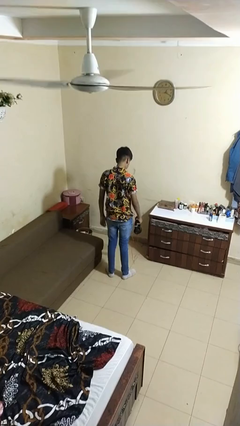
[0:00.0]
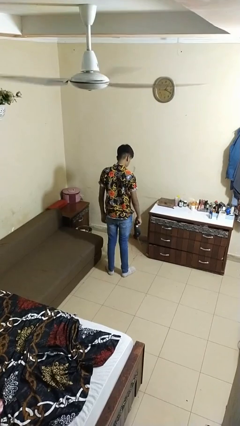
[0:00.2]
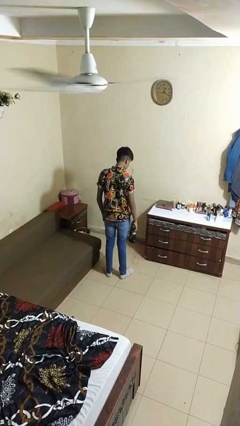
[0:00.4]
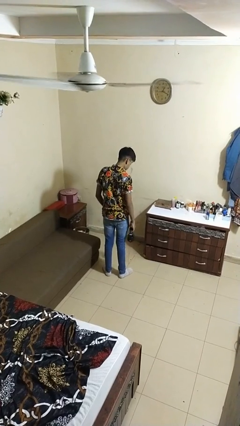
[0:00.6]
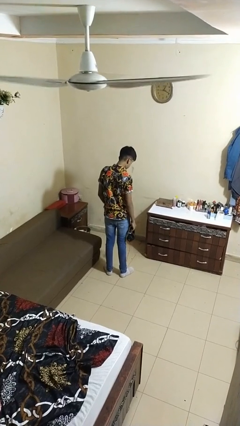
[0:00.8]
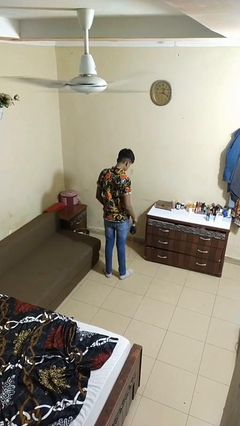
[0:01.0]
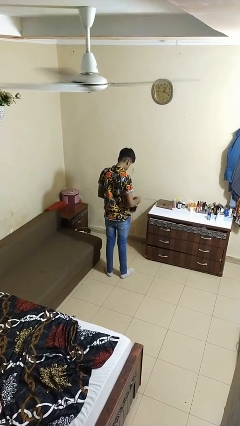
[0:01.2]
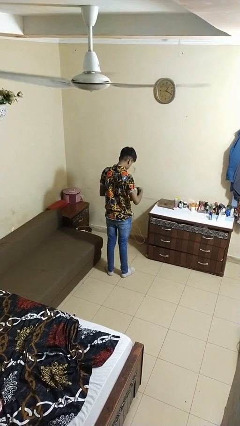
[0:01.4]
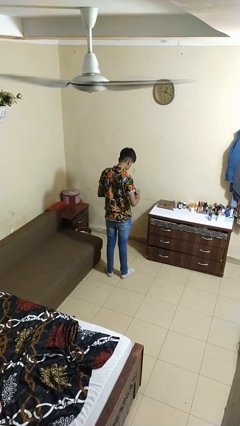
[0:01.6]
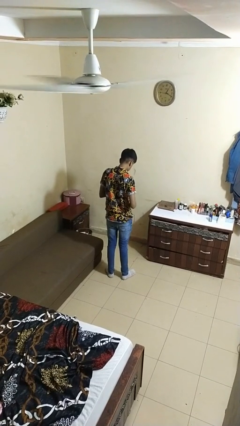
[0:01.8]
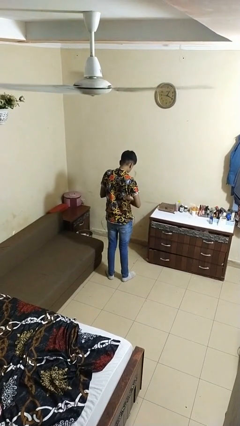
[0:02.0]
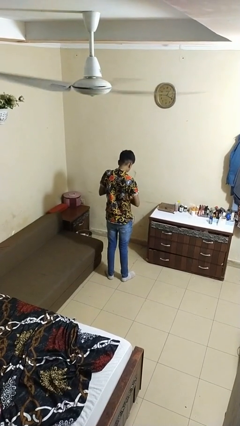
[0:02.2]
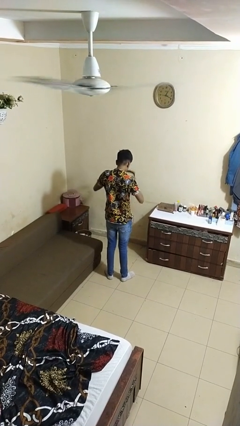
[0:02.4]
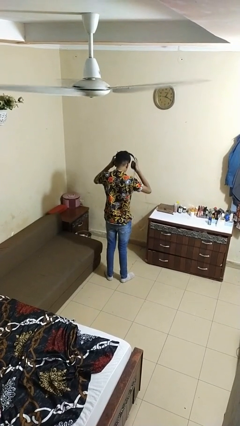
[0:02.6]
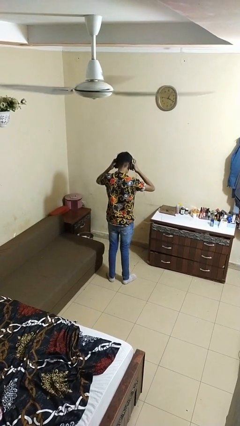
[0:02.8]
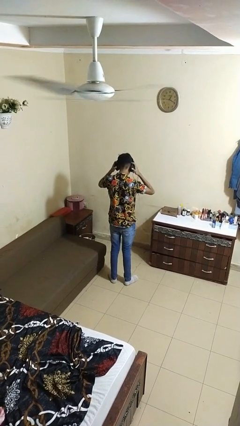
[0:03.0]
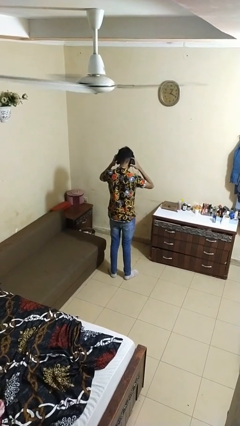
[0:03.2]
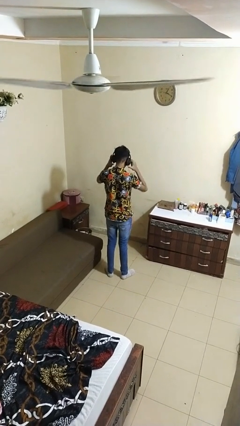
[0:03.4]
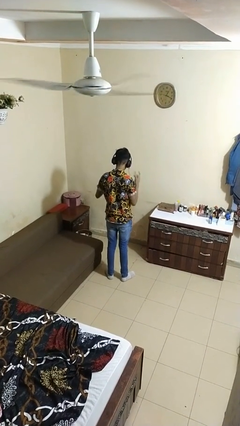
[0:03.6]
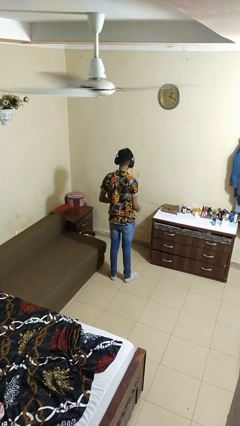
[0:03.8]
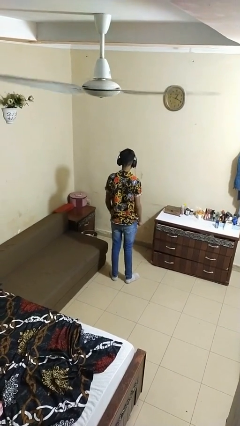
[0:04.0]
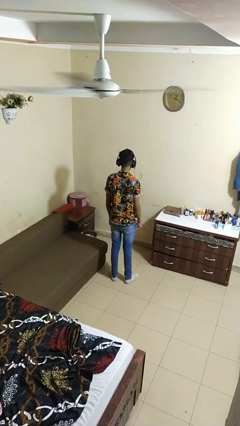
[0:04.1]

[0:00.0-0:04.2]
person puts on headphones

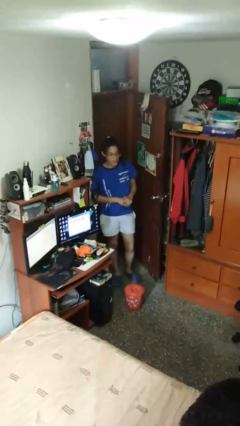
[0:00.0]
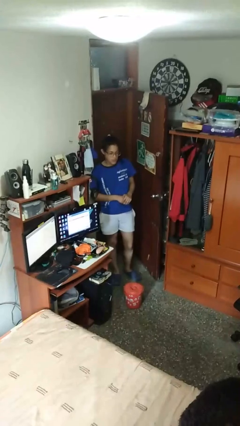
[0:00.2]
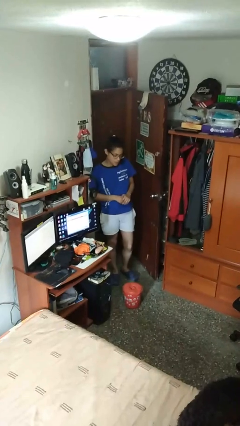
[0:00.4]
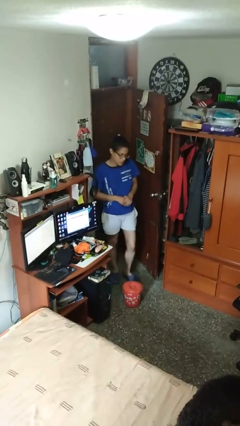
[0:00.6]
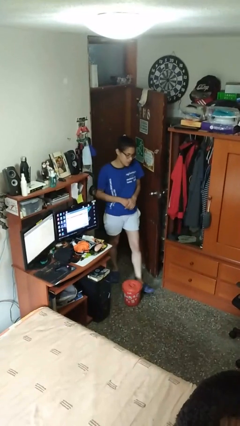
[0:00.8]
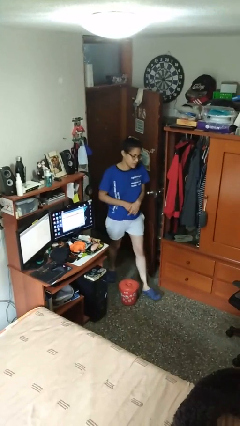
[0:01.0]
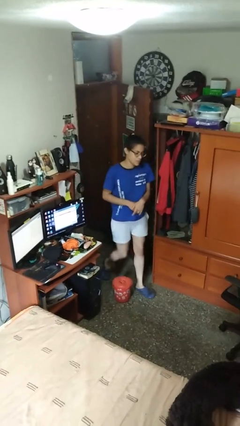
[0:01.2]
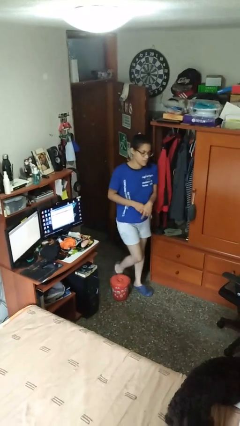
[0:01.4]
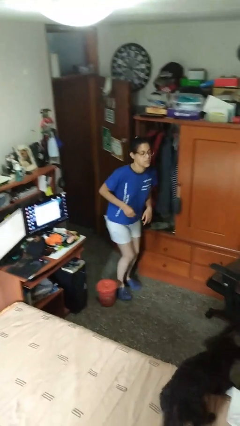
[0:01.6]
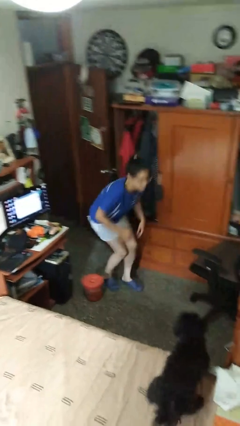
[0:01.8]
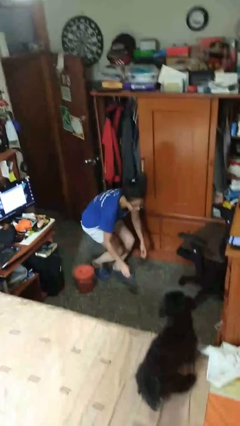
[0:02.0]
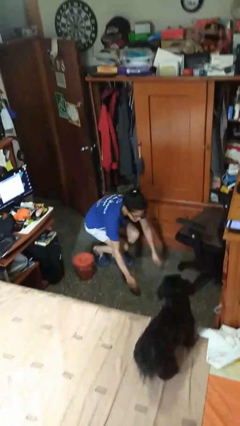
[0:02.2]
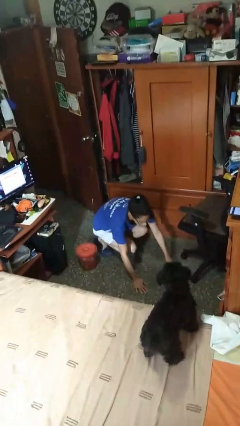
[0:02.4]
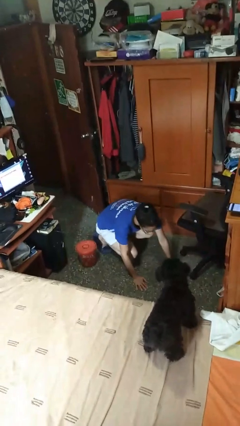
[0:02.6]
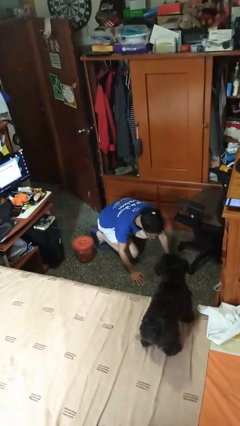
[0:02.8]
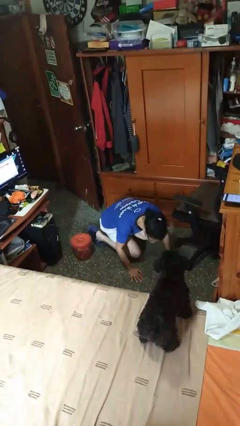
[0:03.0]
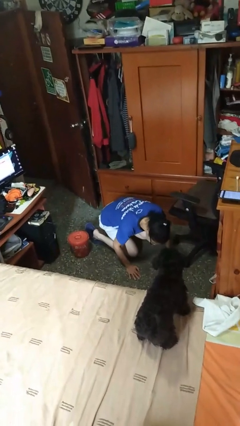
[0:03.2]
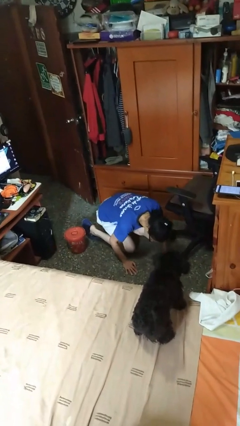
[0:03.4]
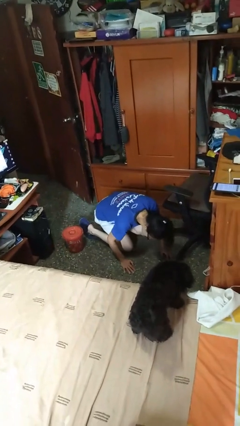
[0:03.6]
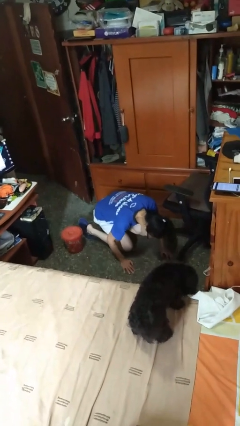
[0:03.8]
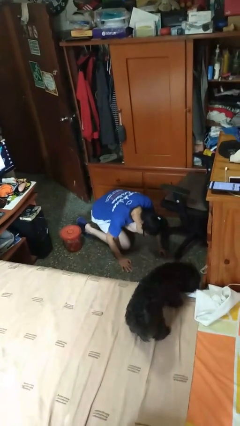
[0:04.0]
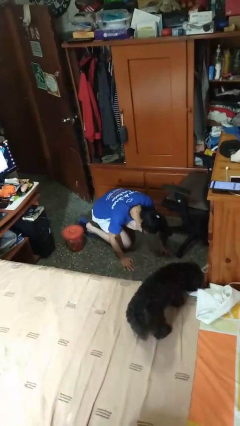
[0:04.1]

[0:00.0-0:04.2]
person trips on object on floor

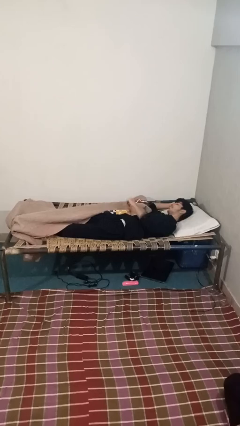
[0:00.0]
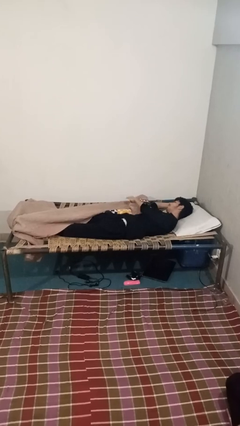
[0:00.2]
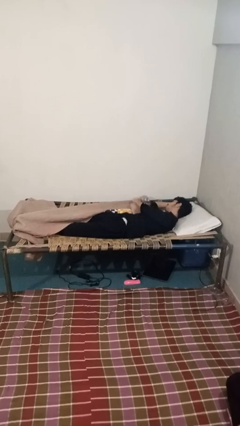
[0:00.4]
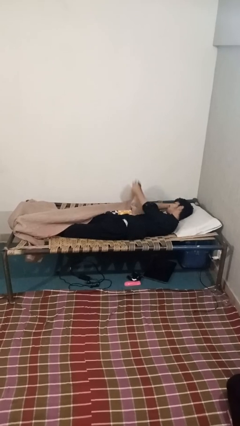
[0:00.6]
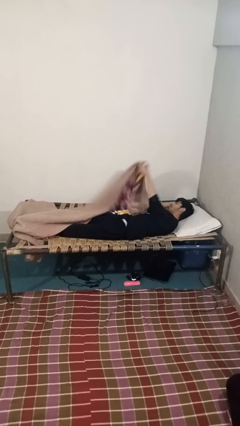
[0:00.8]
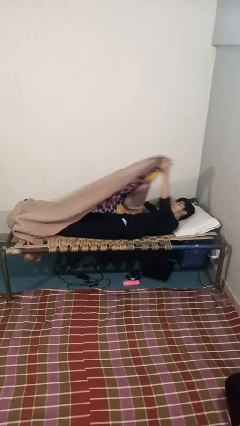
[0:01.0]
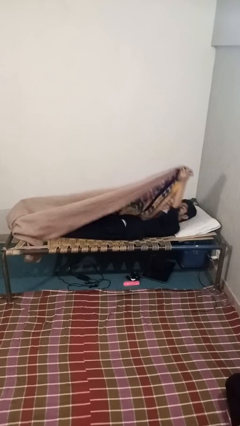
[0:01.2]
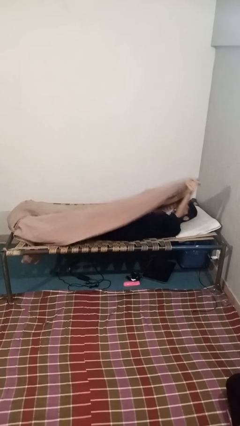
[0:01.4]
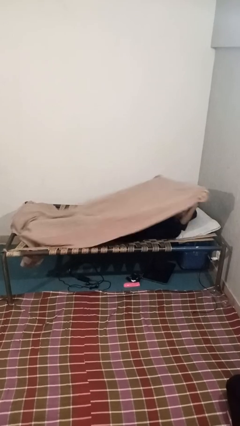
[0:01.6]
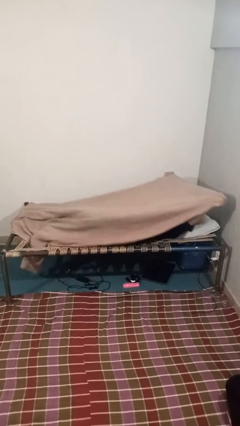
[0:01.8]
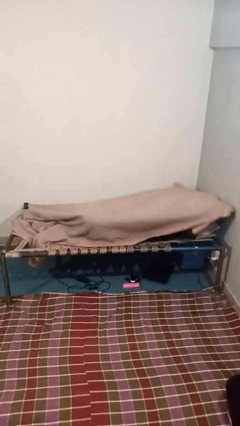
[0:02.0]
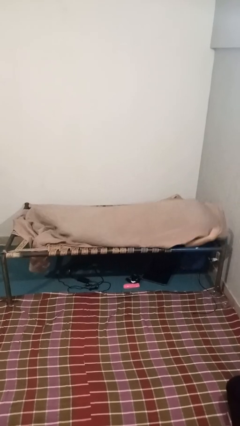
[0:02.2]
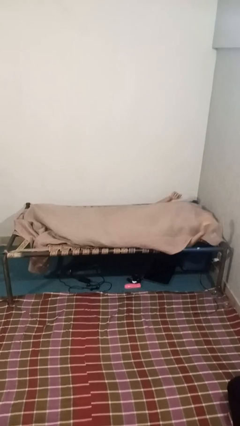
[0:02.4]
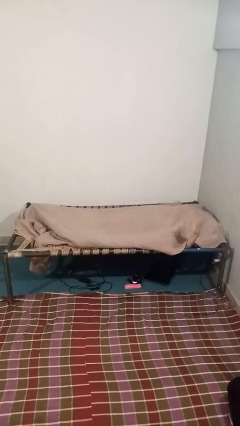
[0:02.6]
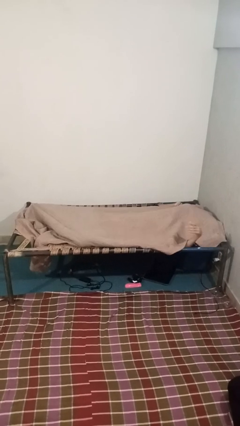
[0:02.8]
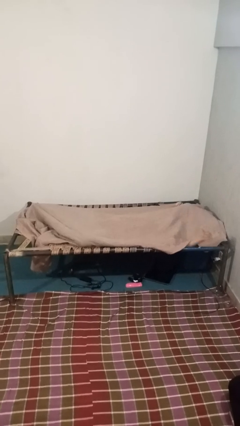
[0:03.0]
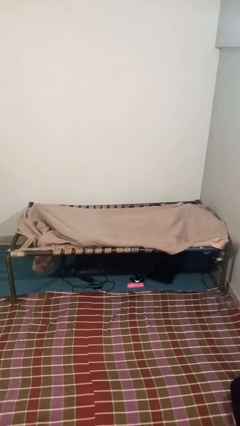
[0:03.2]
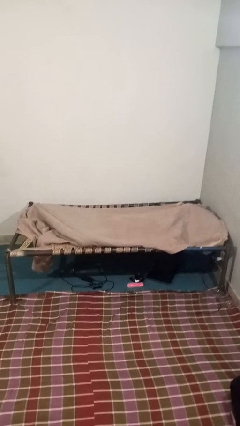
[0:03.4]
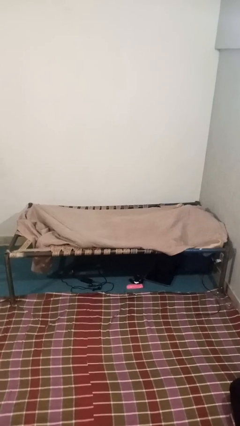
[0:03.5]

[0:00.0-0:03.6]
person covers with blanket

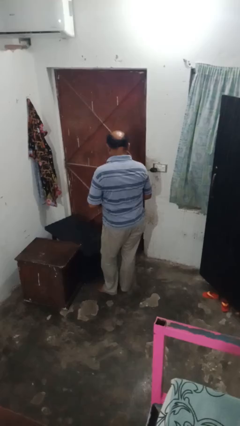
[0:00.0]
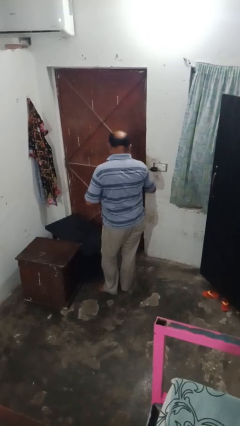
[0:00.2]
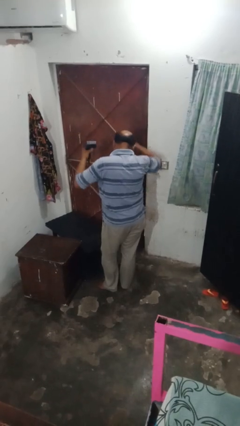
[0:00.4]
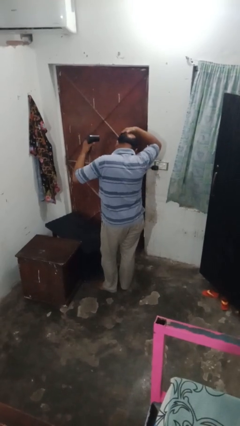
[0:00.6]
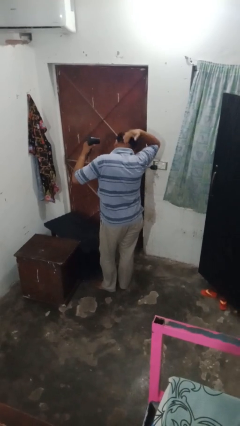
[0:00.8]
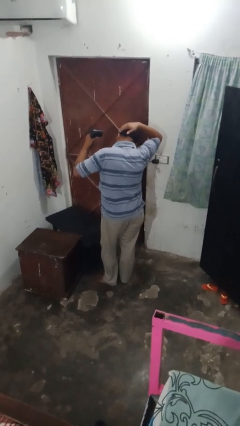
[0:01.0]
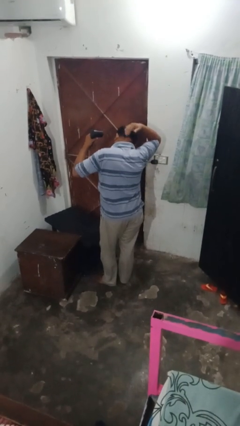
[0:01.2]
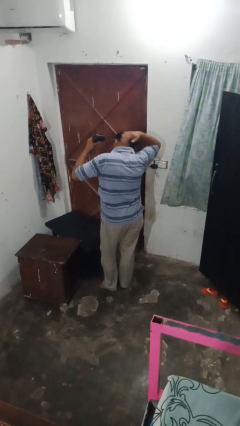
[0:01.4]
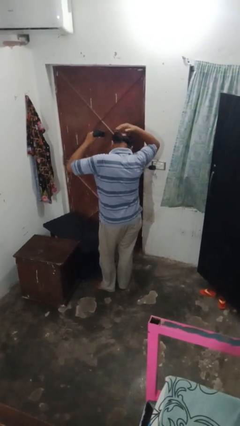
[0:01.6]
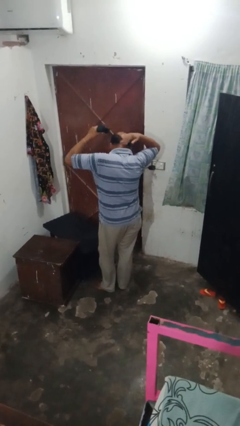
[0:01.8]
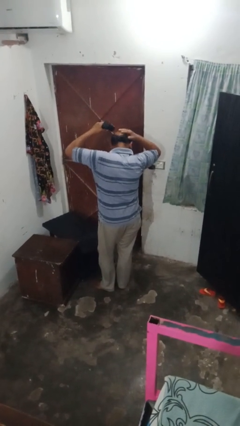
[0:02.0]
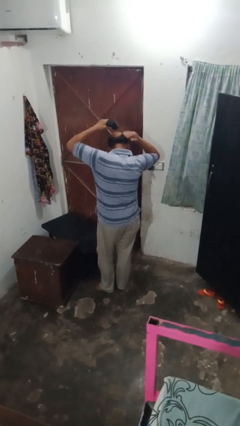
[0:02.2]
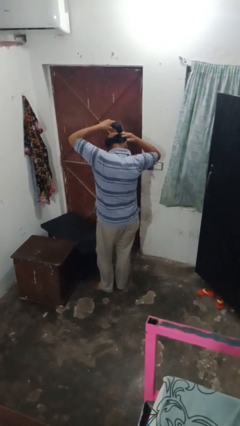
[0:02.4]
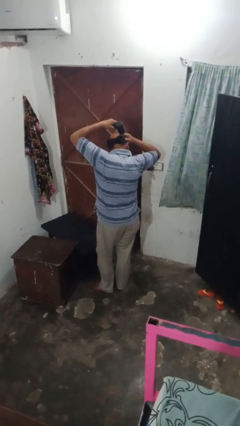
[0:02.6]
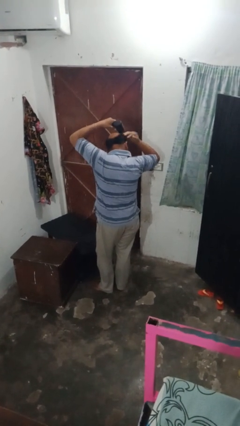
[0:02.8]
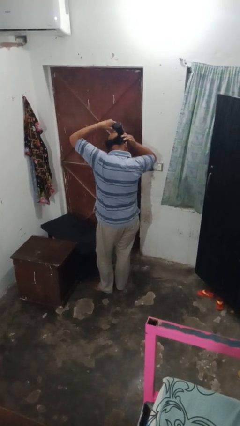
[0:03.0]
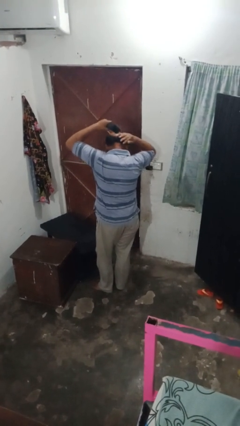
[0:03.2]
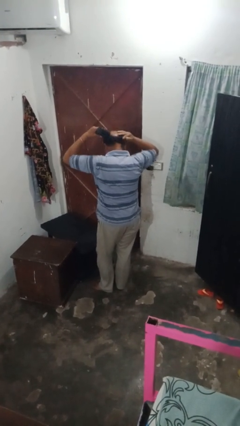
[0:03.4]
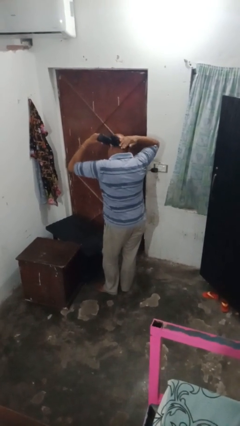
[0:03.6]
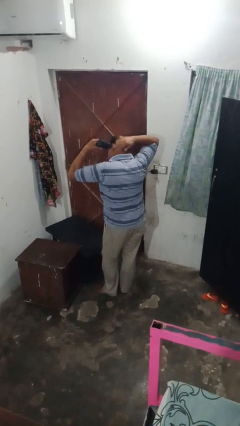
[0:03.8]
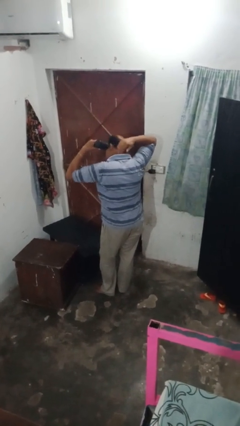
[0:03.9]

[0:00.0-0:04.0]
person dries hair with towel

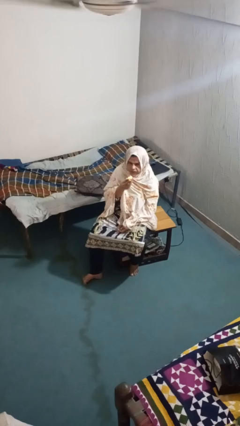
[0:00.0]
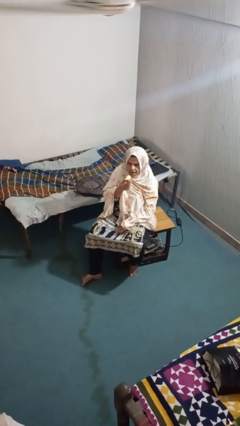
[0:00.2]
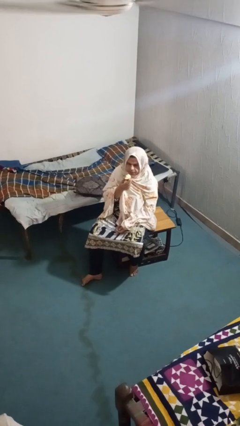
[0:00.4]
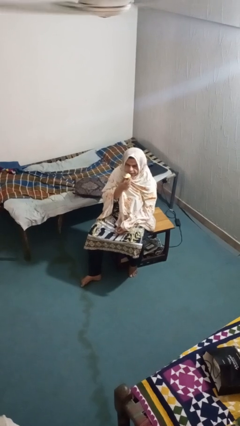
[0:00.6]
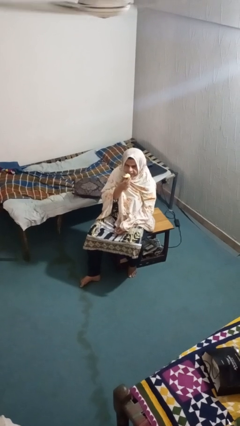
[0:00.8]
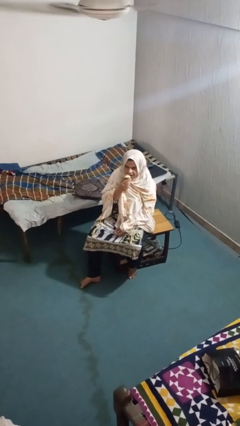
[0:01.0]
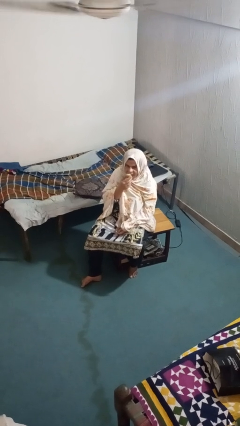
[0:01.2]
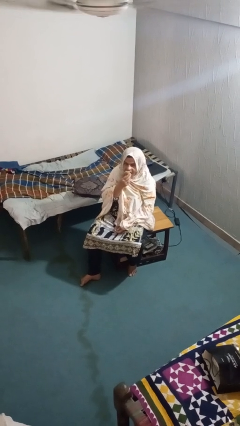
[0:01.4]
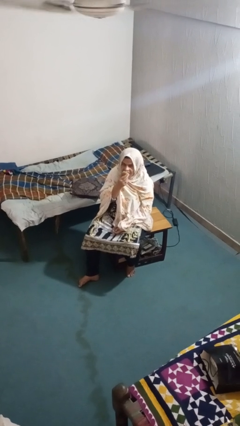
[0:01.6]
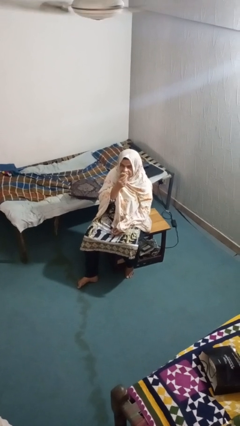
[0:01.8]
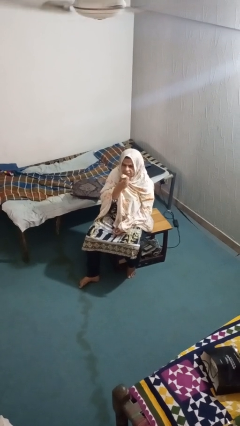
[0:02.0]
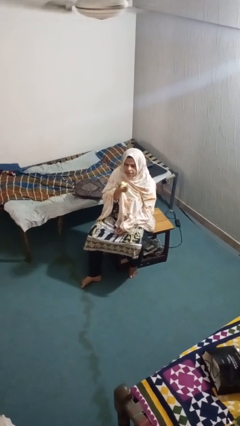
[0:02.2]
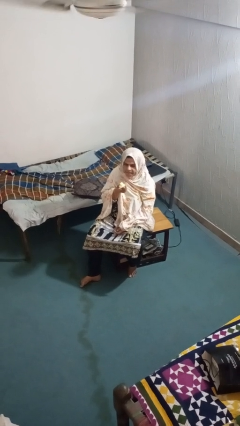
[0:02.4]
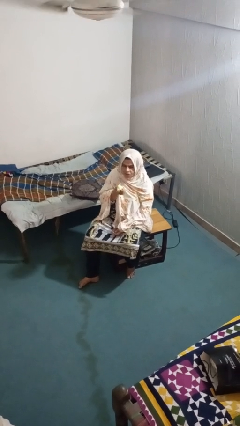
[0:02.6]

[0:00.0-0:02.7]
person eats apple
